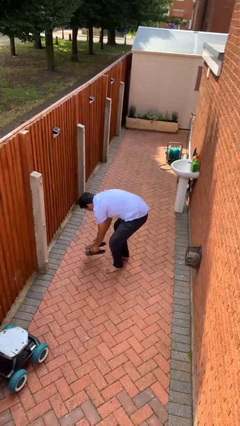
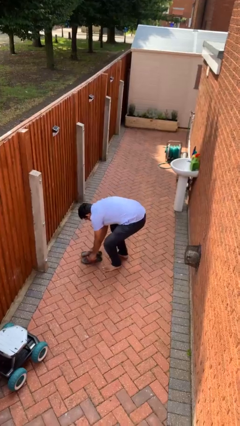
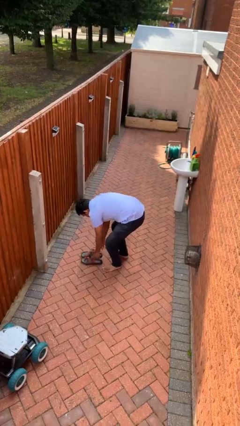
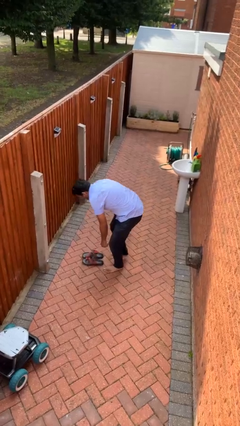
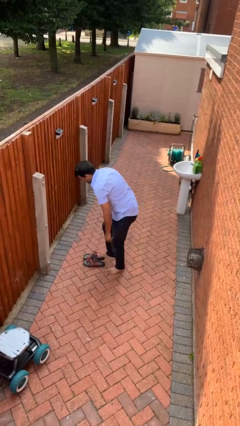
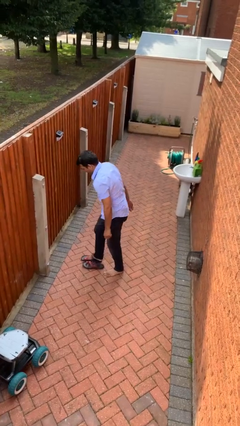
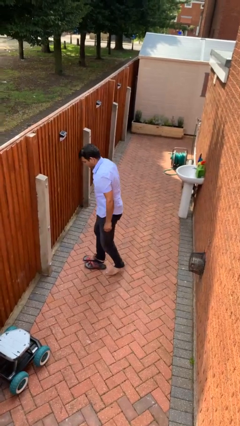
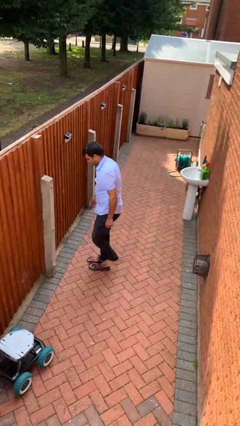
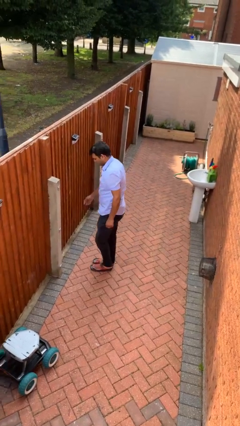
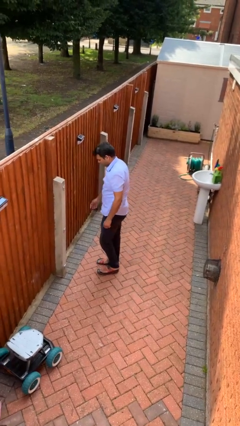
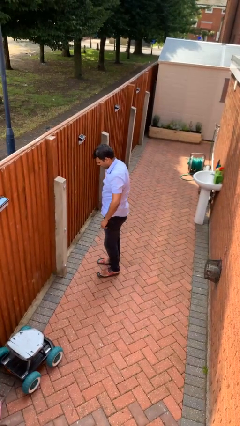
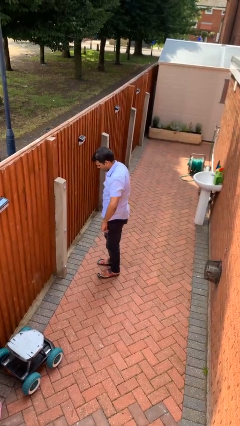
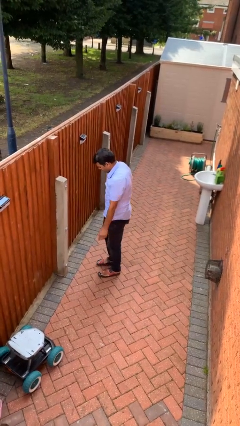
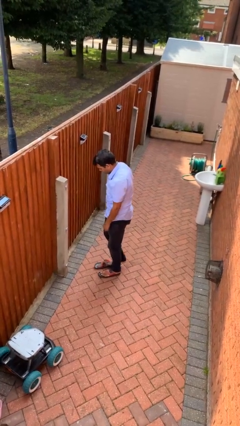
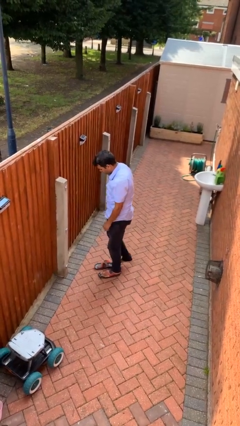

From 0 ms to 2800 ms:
person puts on shoes

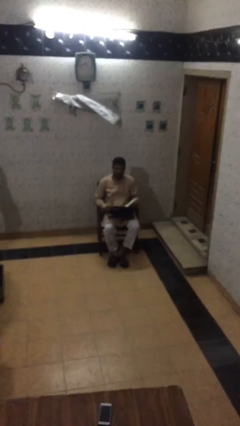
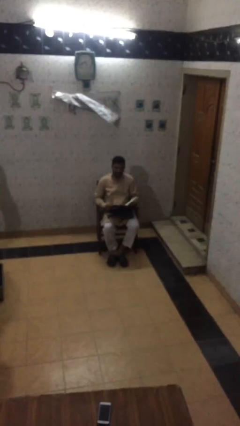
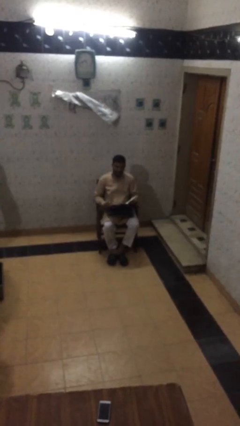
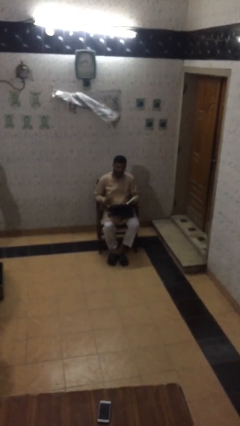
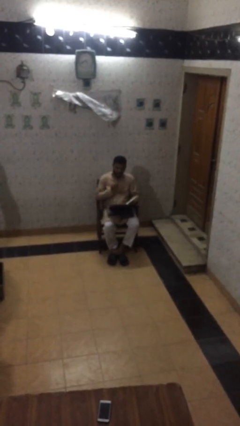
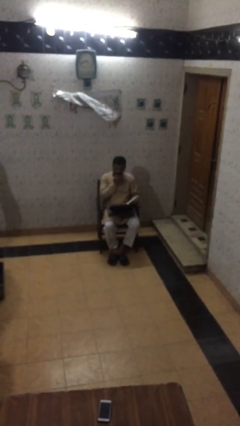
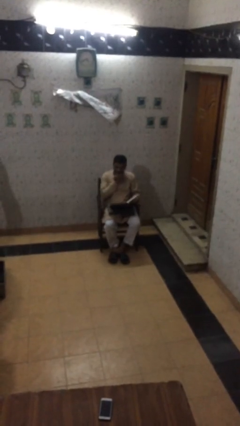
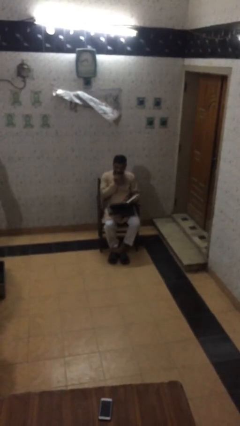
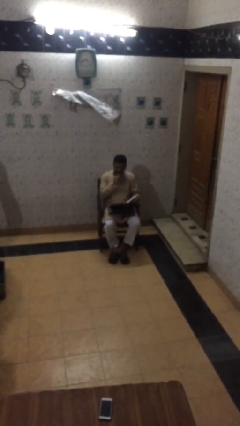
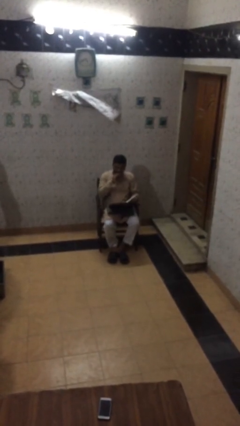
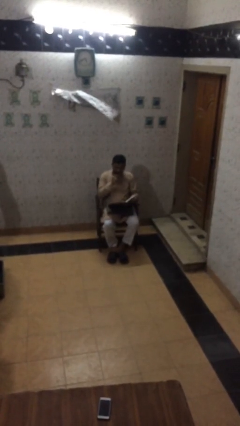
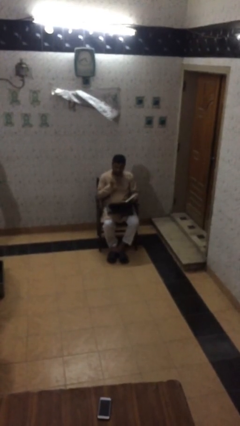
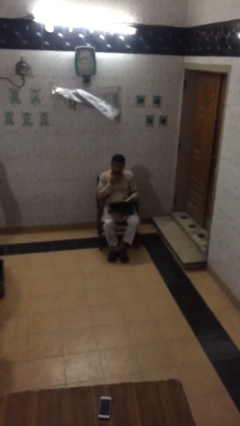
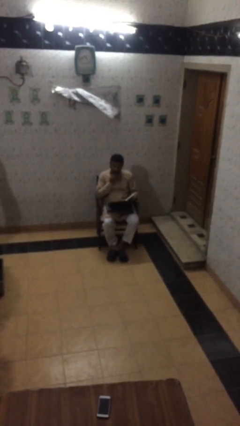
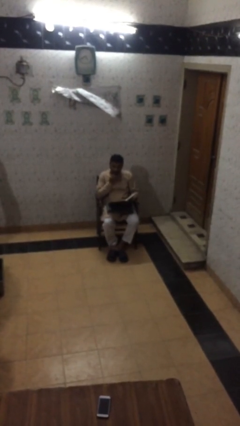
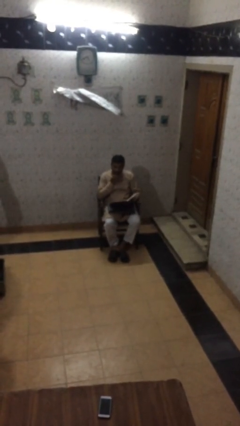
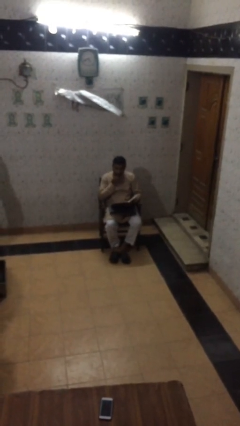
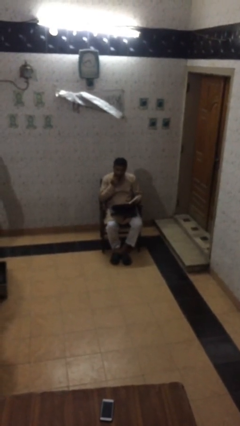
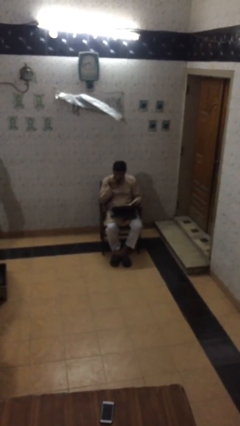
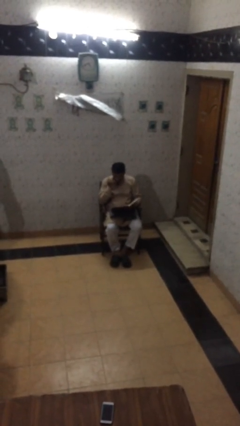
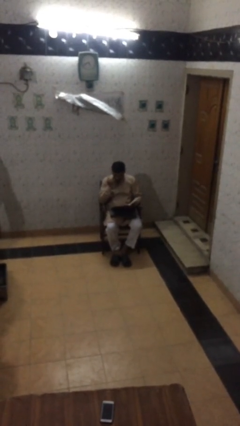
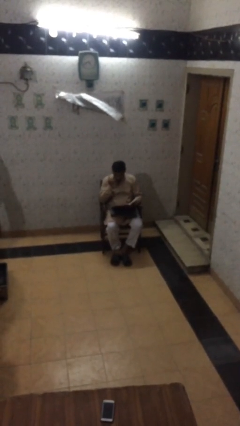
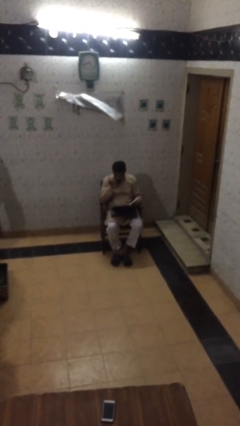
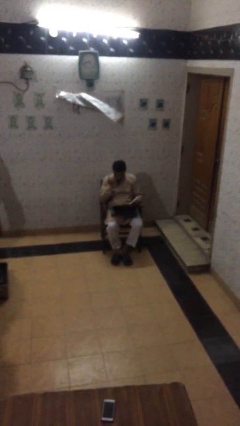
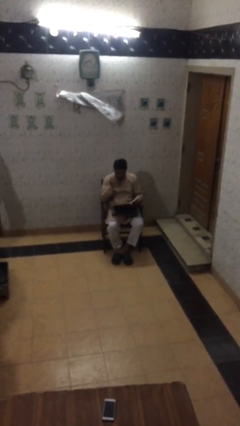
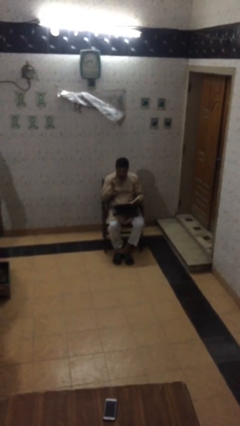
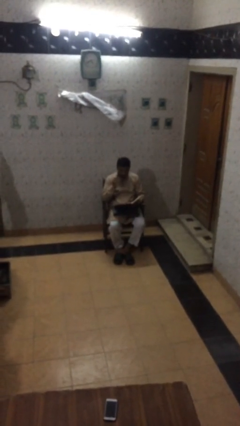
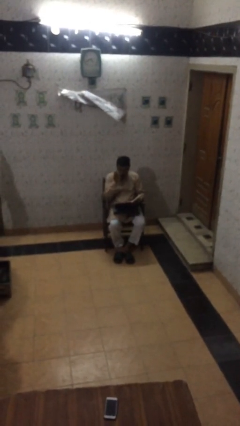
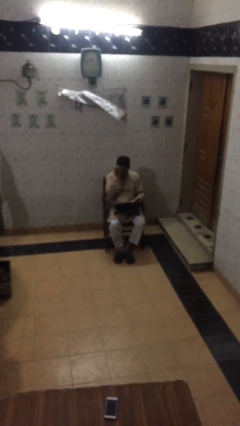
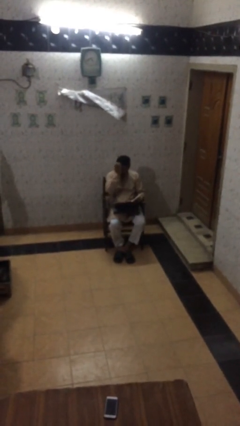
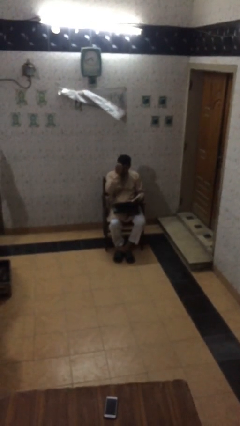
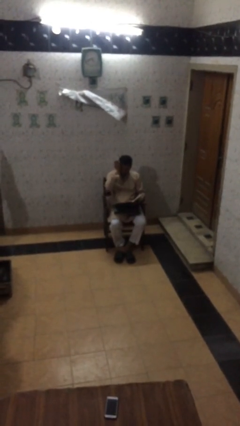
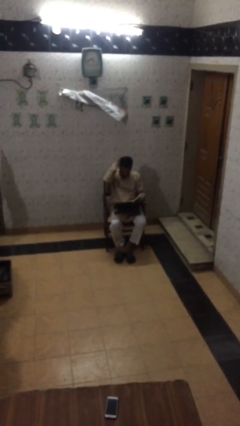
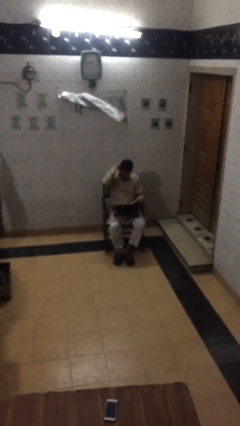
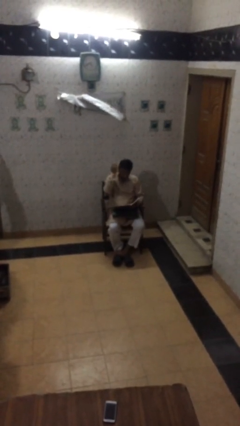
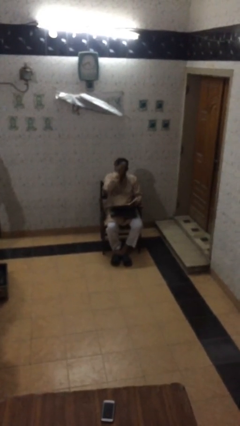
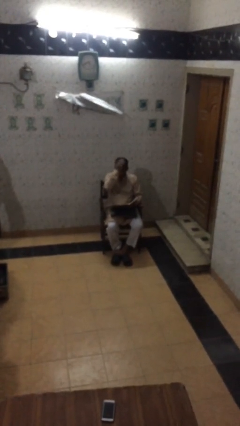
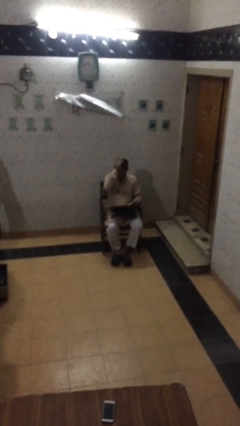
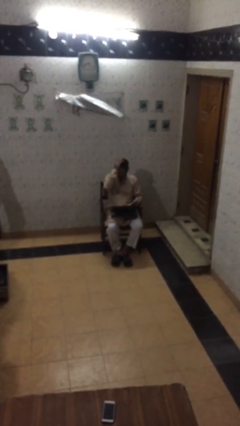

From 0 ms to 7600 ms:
person reads document

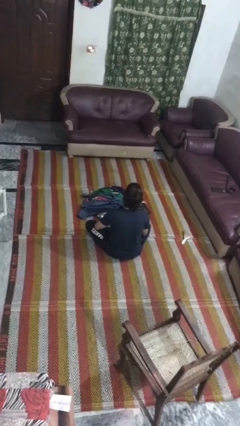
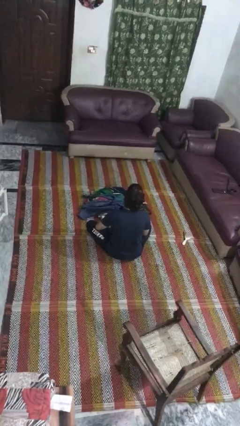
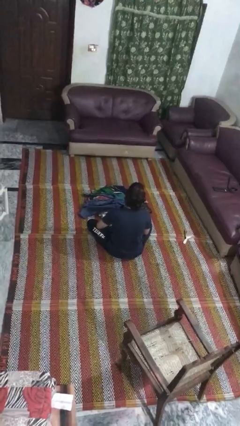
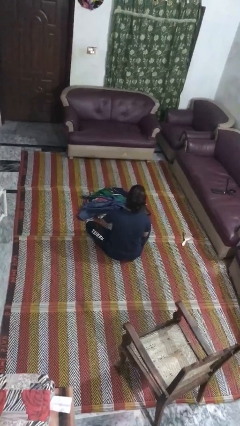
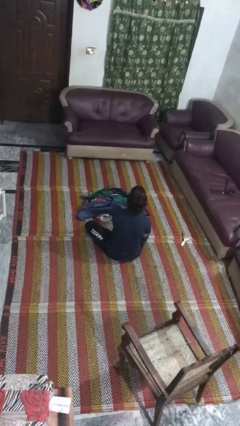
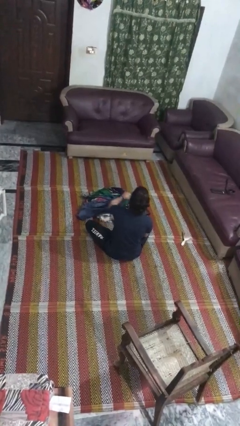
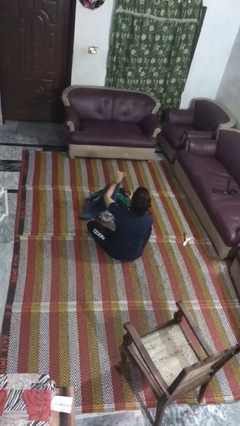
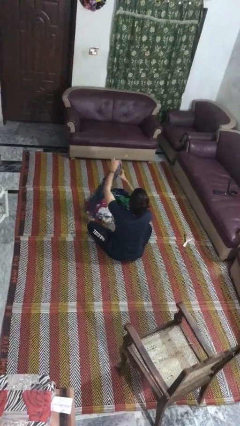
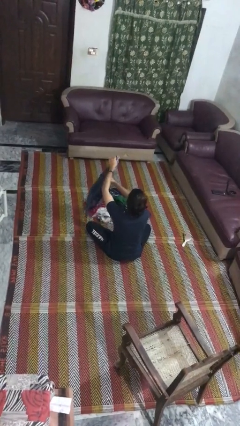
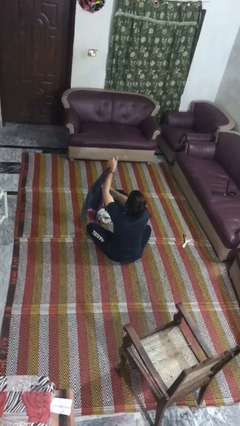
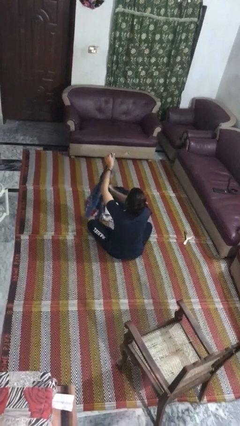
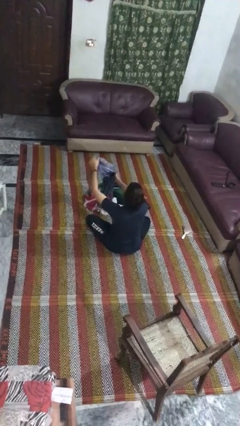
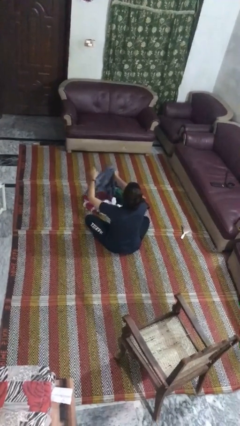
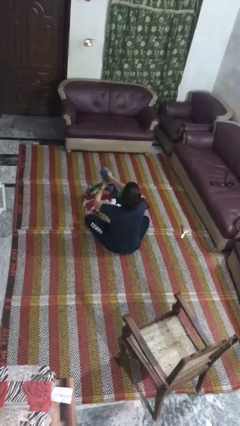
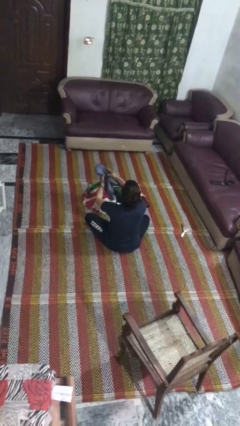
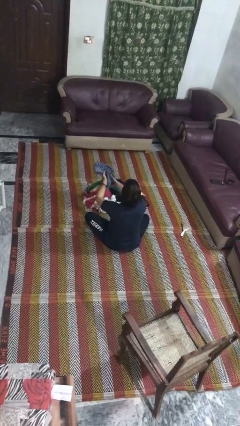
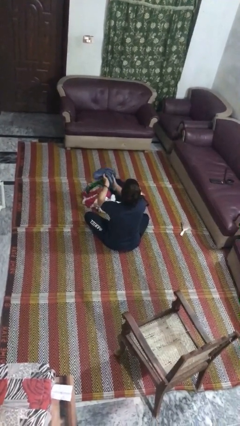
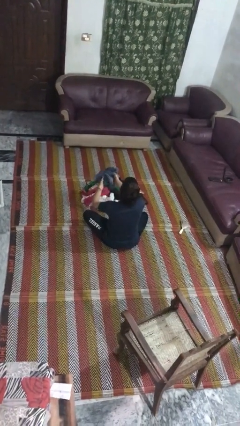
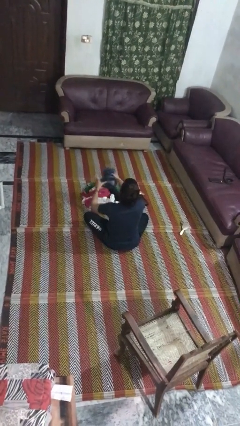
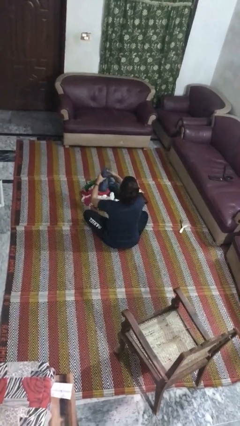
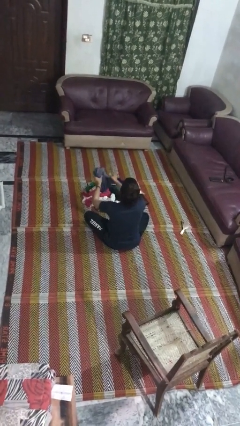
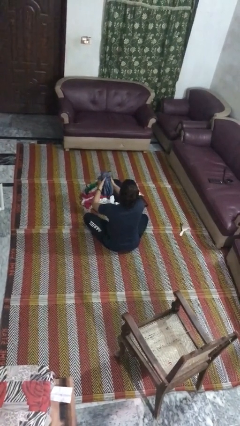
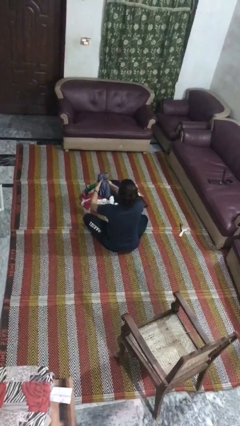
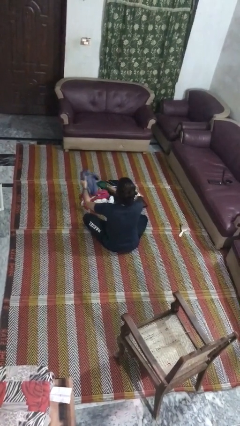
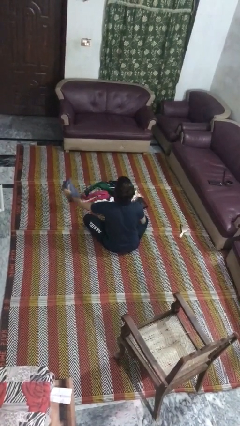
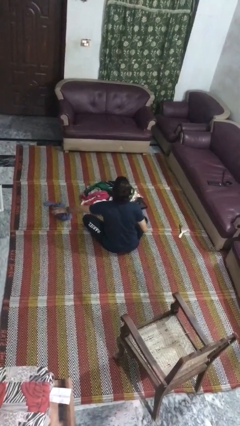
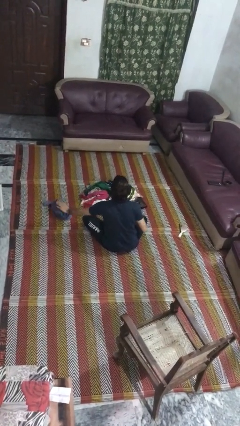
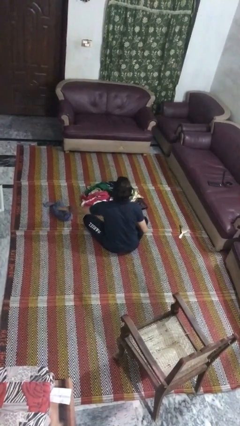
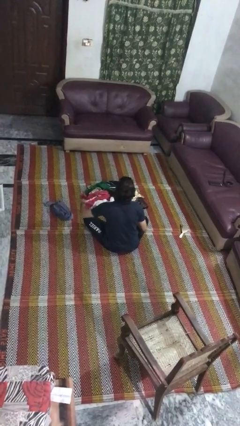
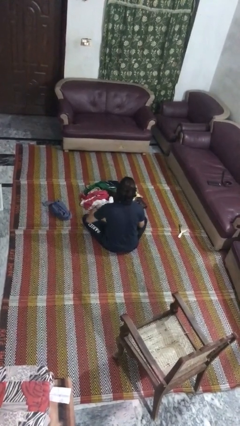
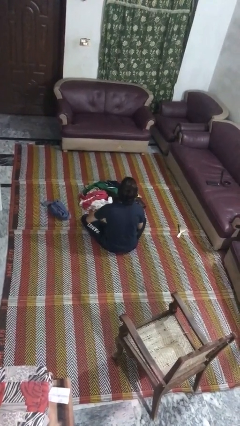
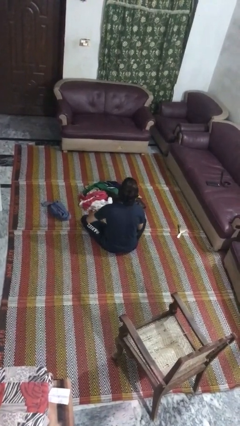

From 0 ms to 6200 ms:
person folds shirt

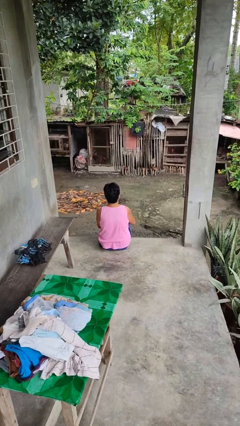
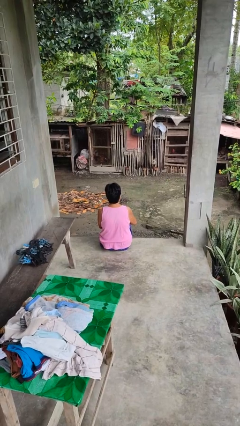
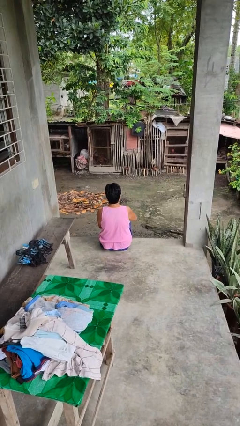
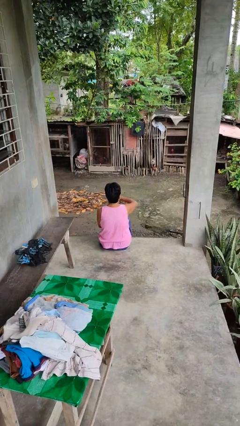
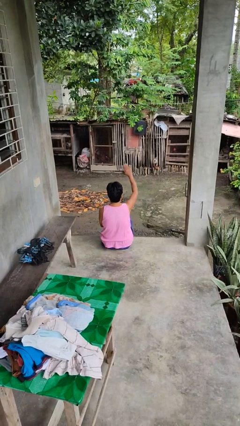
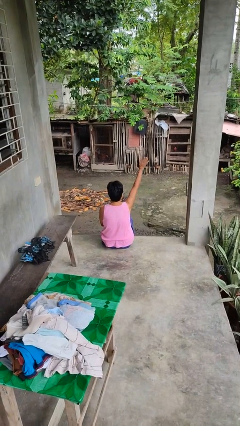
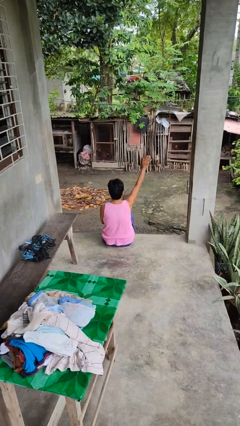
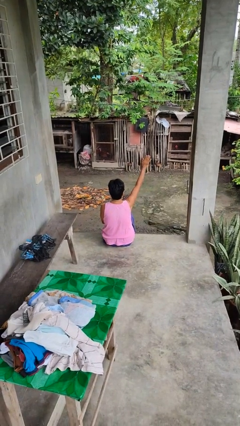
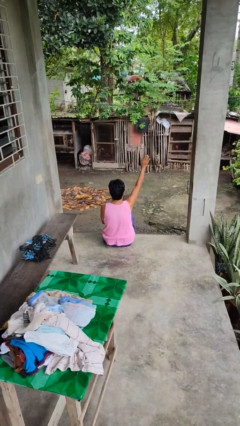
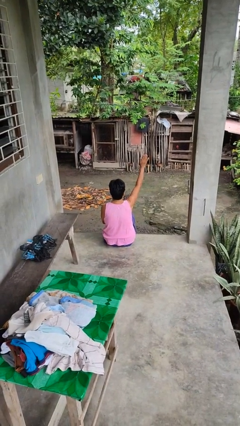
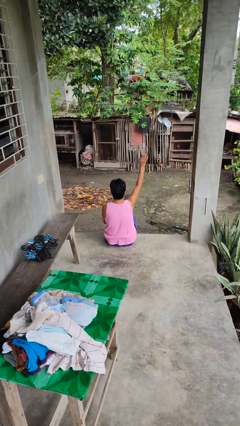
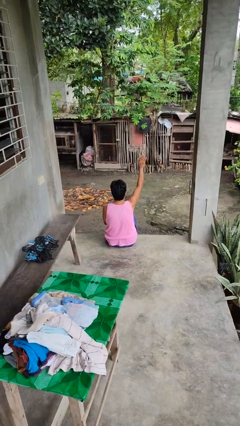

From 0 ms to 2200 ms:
person gestures swipe up
